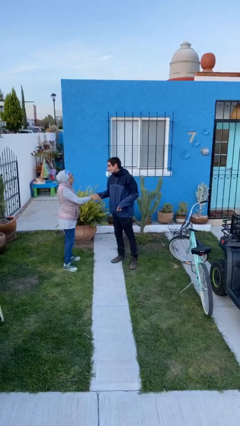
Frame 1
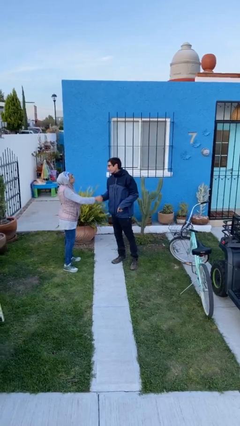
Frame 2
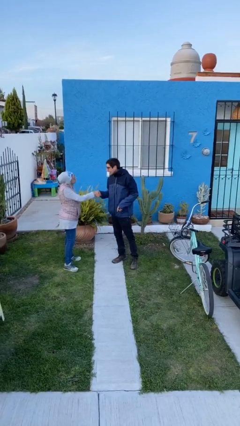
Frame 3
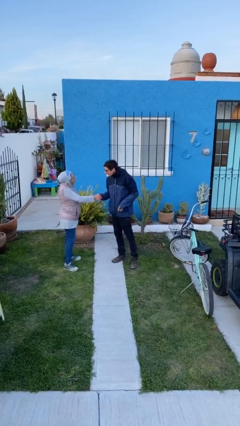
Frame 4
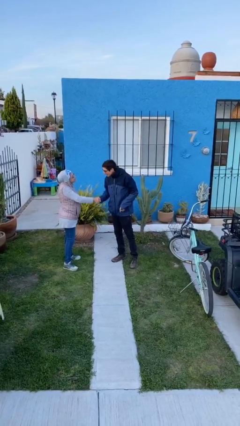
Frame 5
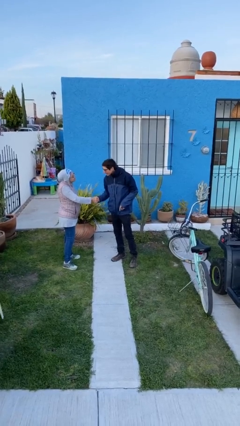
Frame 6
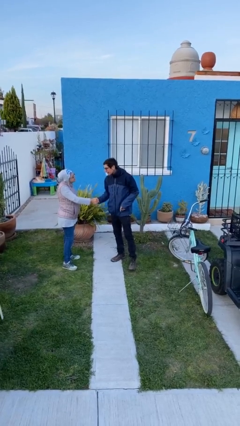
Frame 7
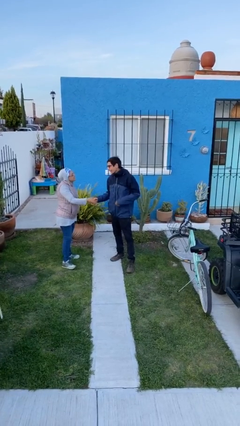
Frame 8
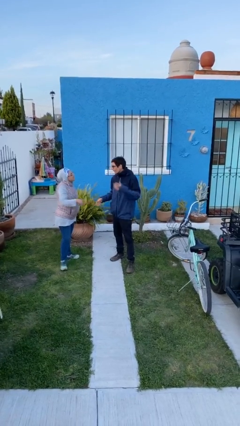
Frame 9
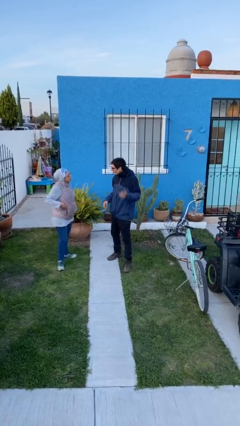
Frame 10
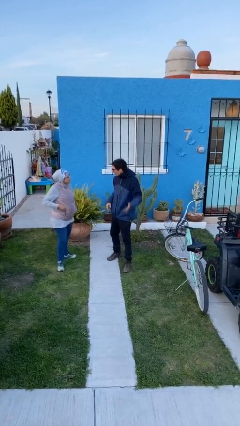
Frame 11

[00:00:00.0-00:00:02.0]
person shakes hand

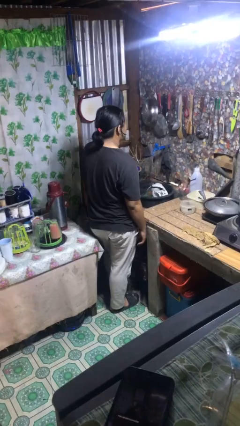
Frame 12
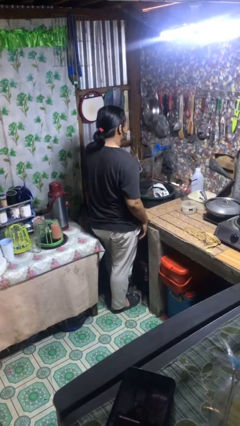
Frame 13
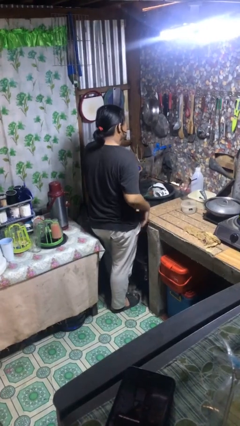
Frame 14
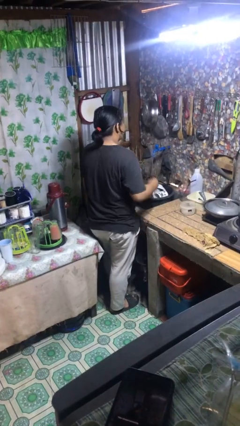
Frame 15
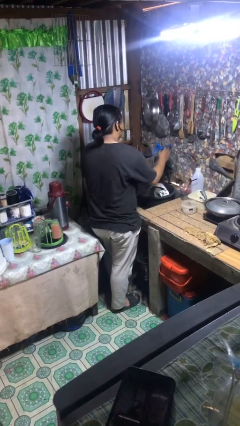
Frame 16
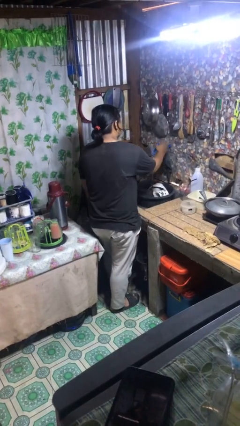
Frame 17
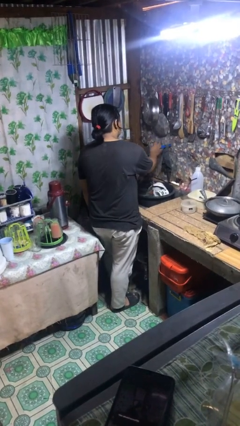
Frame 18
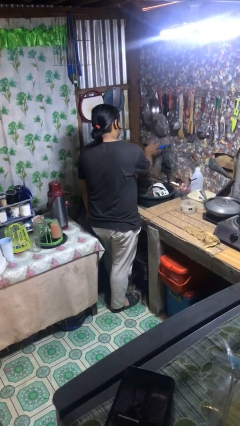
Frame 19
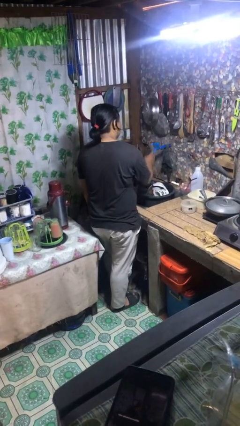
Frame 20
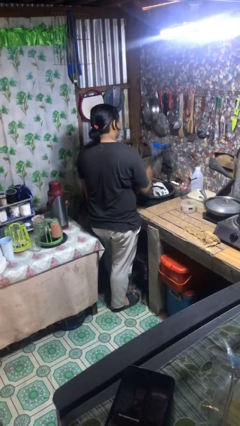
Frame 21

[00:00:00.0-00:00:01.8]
person turns off faucet

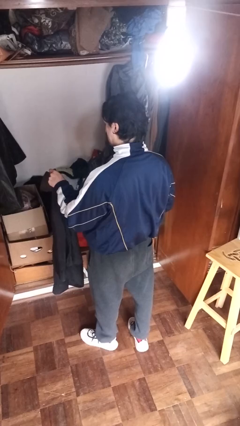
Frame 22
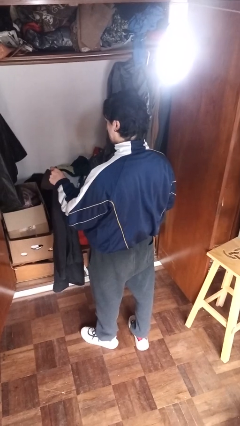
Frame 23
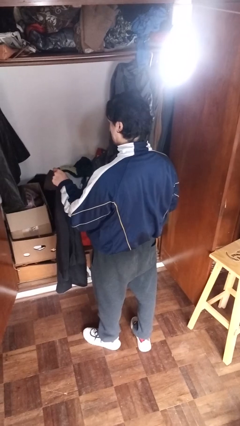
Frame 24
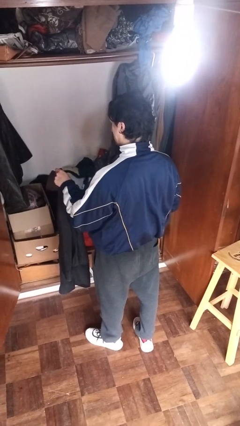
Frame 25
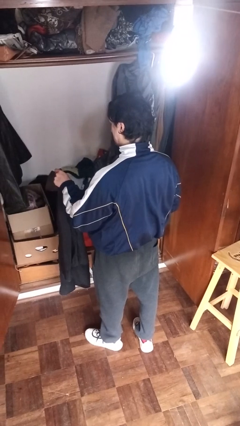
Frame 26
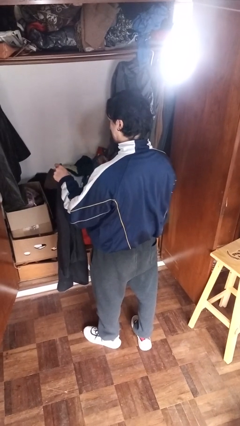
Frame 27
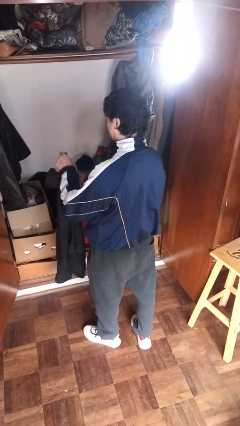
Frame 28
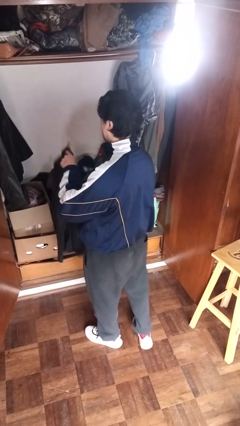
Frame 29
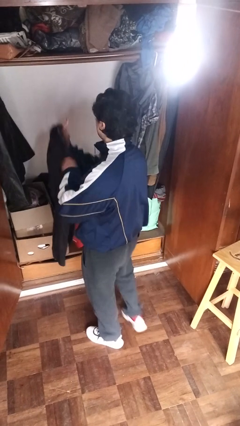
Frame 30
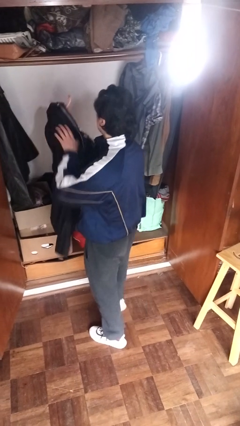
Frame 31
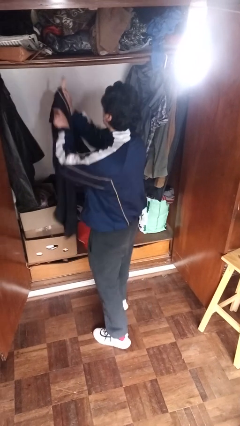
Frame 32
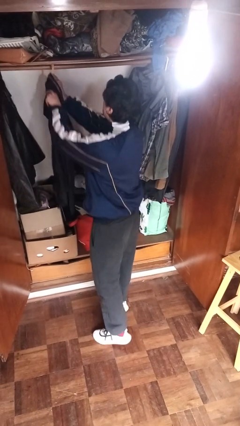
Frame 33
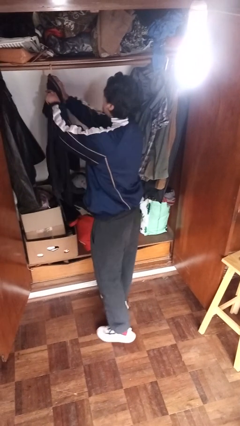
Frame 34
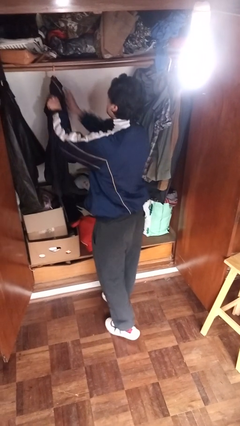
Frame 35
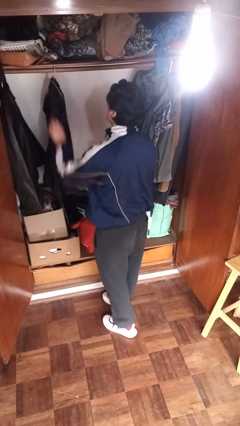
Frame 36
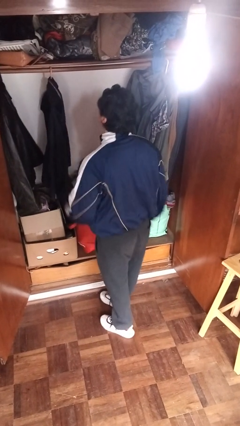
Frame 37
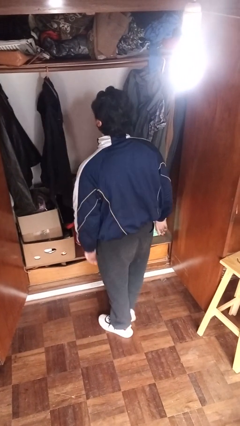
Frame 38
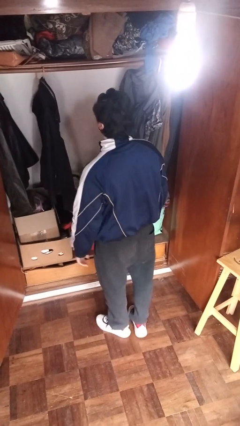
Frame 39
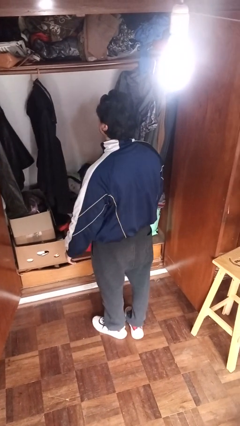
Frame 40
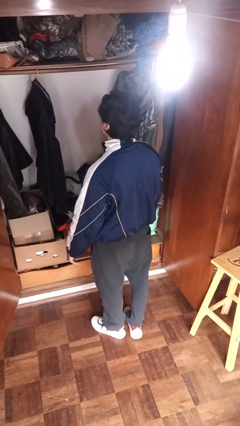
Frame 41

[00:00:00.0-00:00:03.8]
person puts clothes into closet

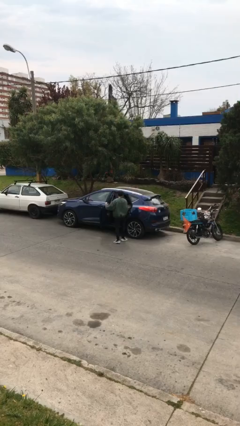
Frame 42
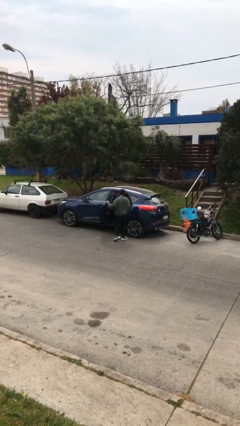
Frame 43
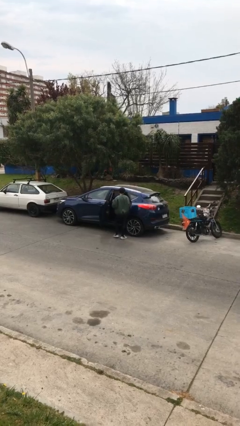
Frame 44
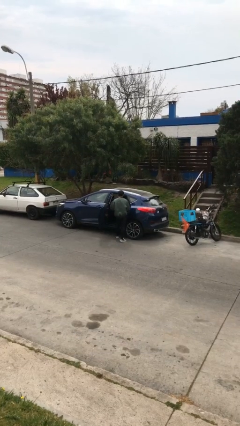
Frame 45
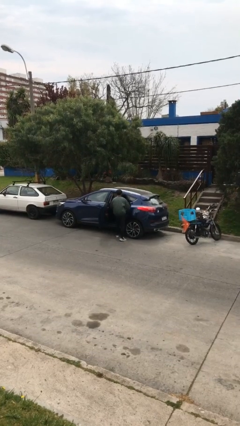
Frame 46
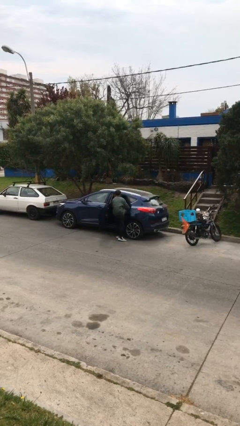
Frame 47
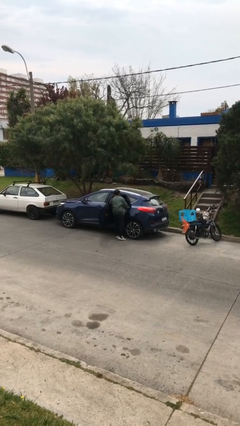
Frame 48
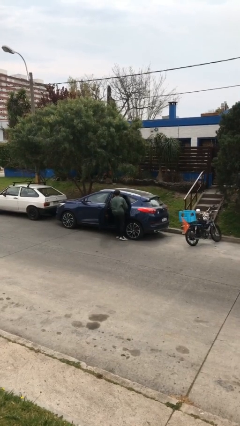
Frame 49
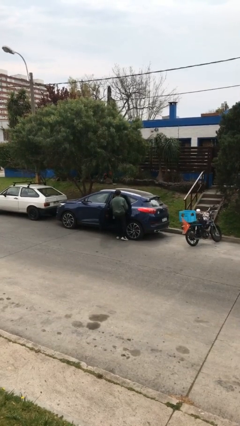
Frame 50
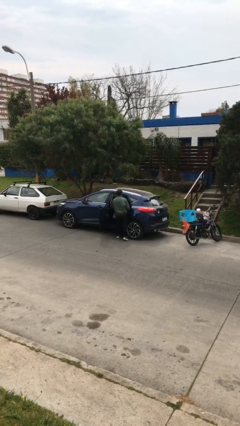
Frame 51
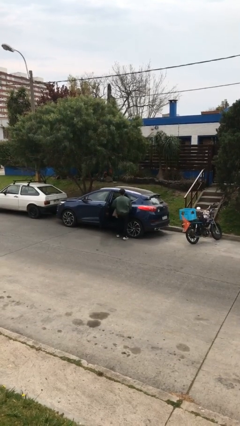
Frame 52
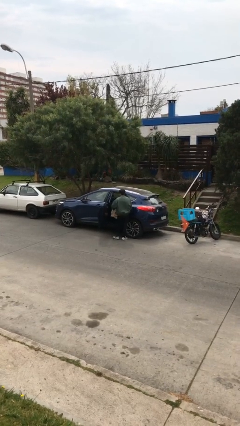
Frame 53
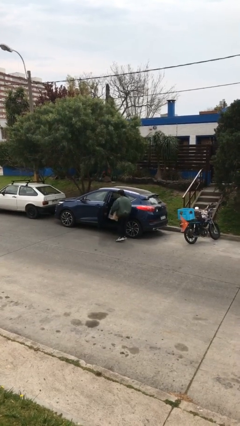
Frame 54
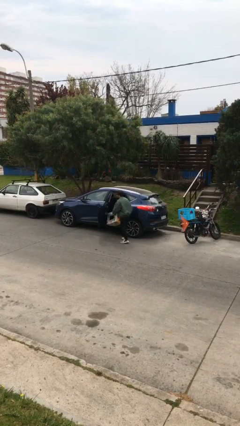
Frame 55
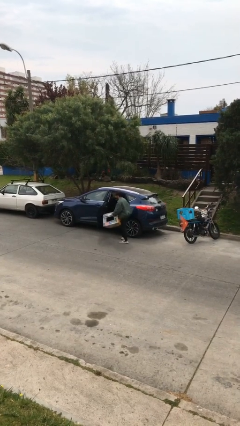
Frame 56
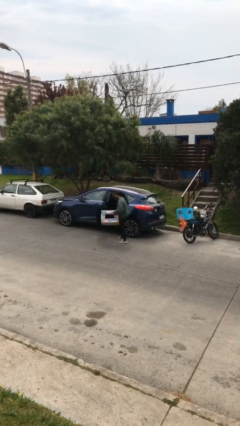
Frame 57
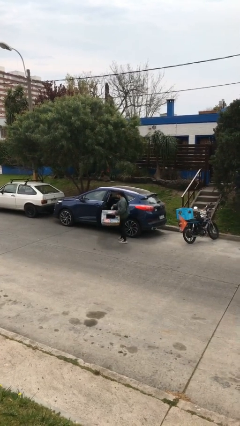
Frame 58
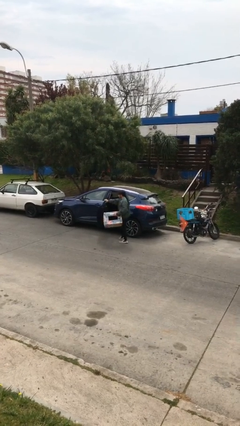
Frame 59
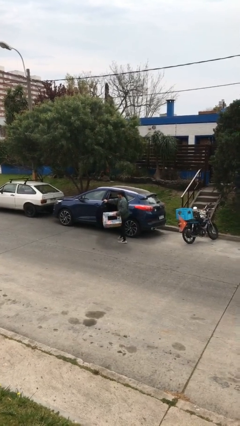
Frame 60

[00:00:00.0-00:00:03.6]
person unloads car

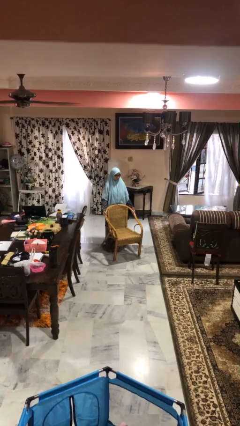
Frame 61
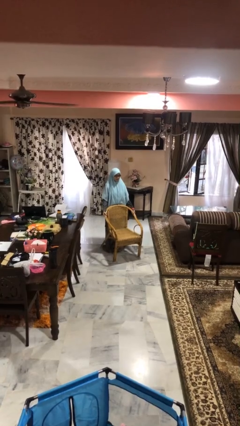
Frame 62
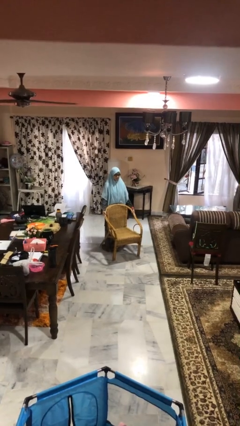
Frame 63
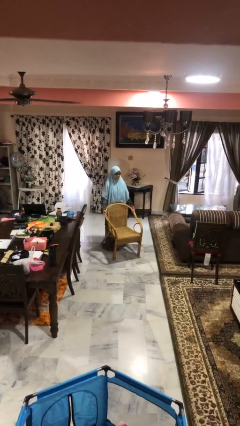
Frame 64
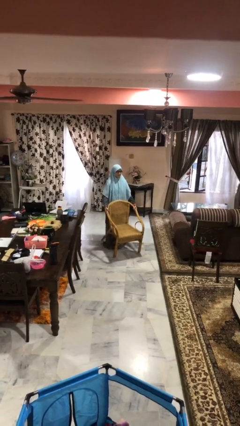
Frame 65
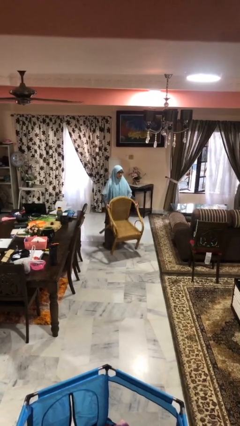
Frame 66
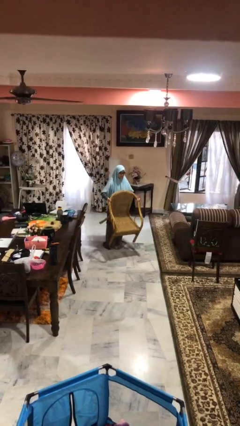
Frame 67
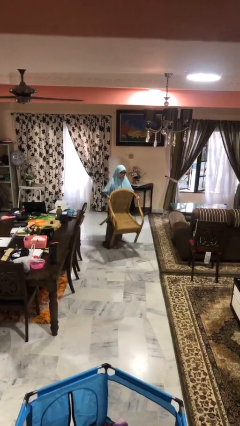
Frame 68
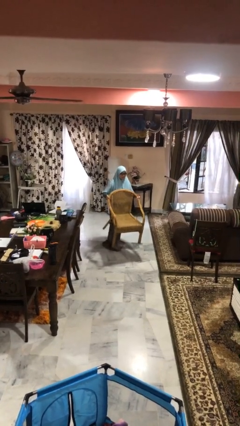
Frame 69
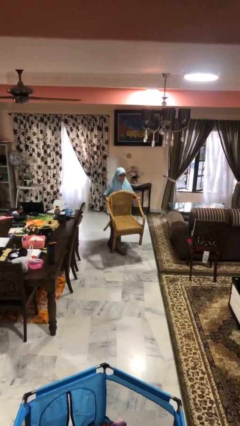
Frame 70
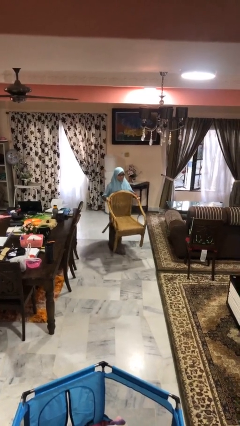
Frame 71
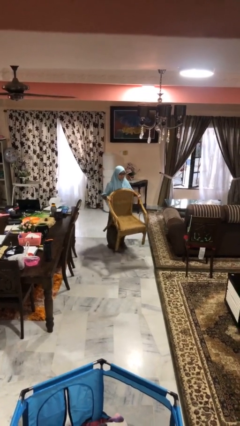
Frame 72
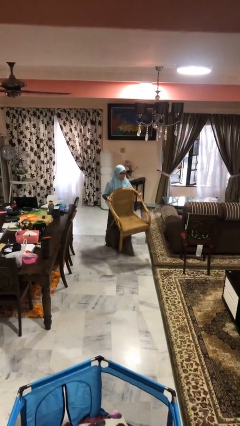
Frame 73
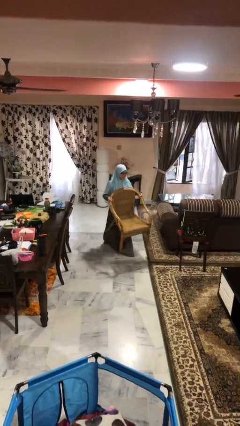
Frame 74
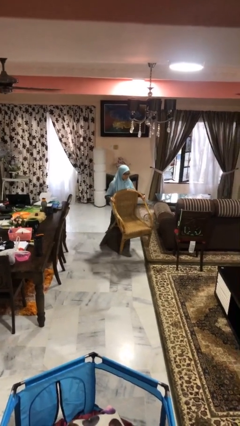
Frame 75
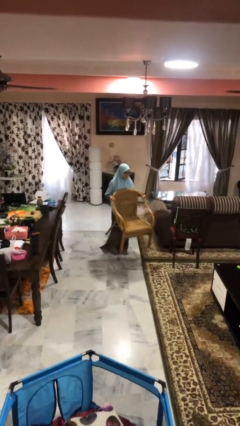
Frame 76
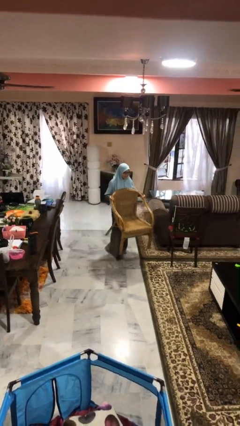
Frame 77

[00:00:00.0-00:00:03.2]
person carries furniture

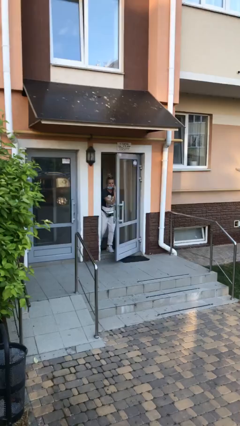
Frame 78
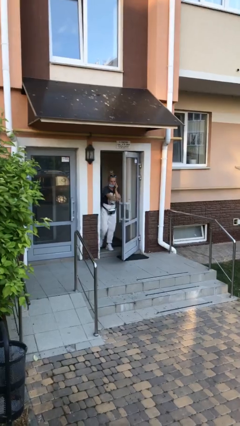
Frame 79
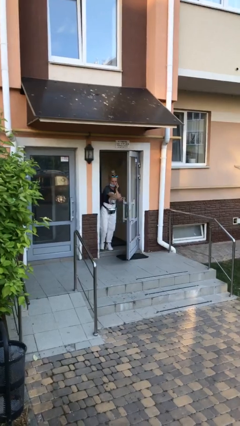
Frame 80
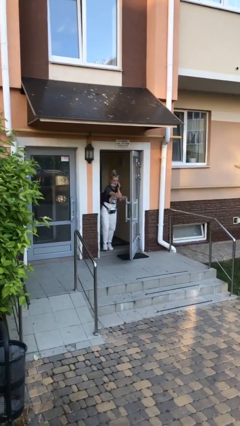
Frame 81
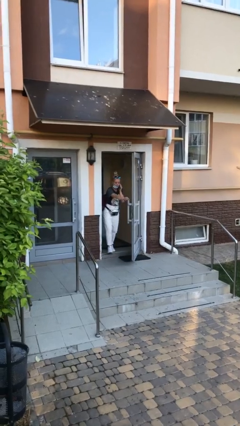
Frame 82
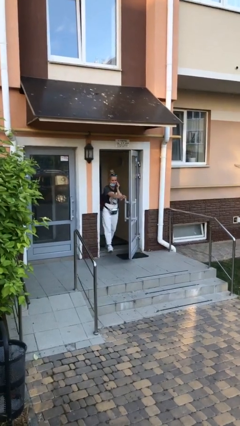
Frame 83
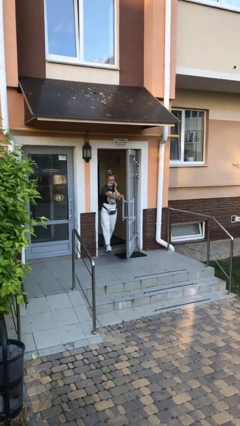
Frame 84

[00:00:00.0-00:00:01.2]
person opens facility door

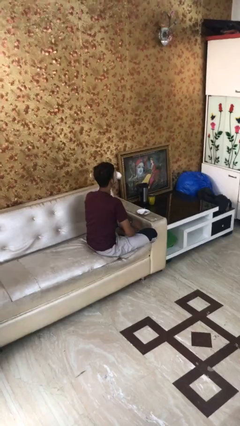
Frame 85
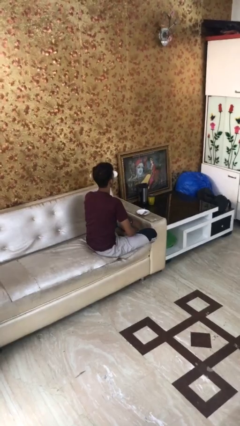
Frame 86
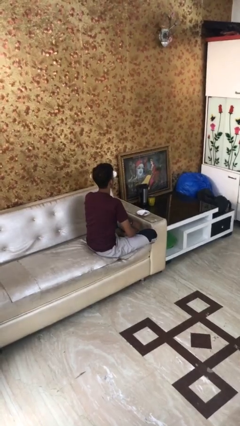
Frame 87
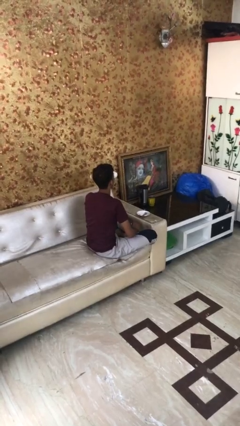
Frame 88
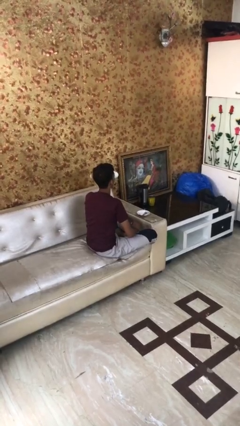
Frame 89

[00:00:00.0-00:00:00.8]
person drinks from mug

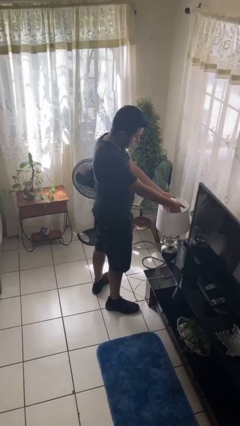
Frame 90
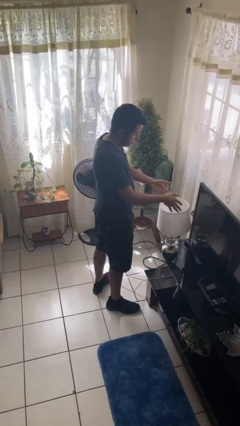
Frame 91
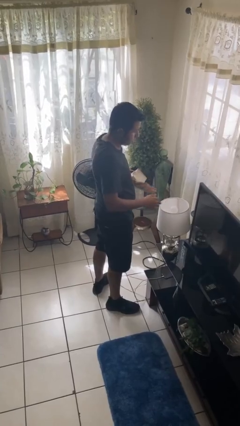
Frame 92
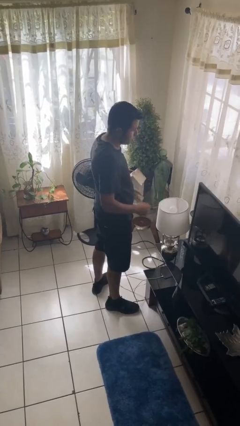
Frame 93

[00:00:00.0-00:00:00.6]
person turns off lamp
